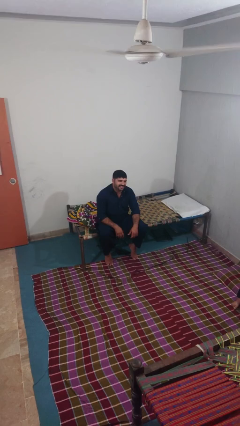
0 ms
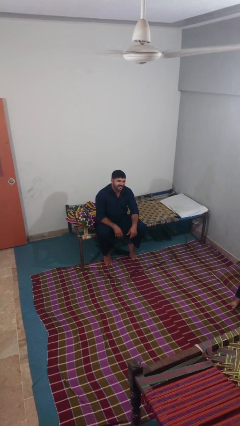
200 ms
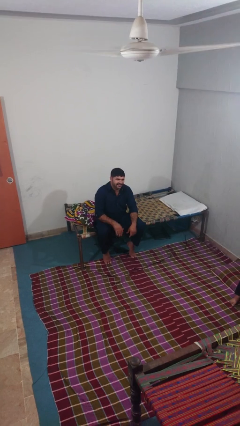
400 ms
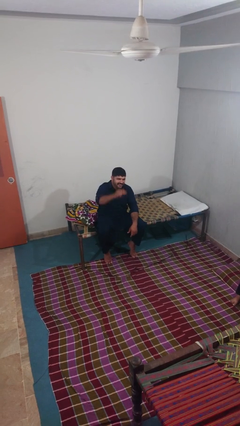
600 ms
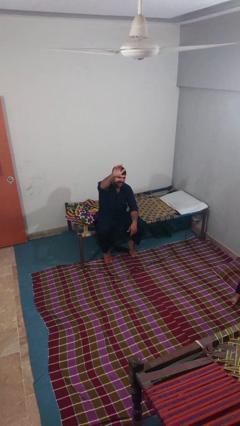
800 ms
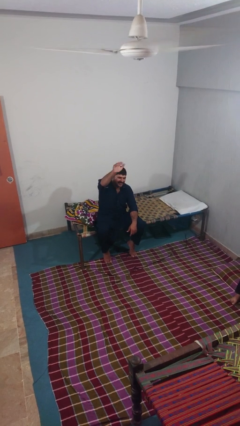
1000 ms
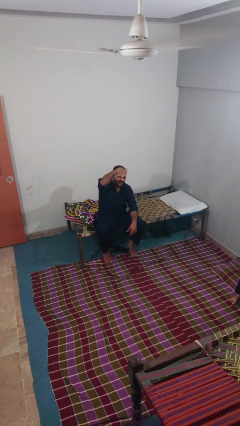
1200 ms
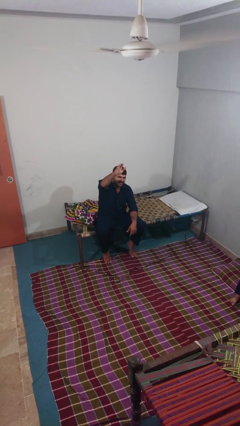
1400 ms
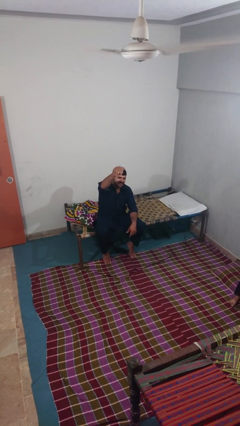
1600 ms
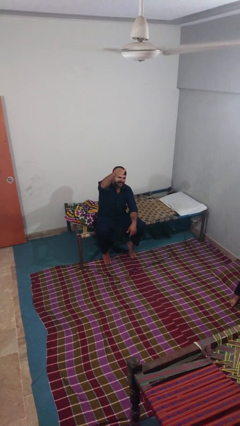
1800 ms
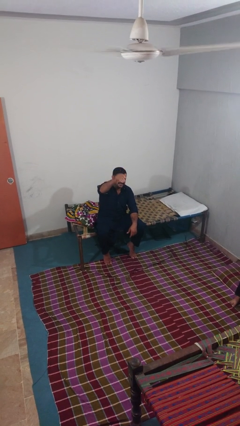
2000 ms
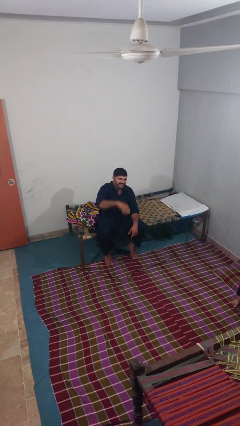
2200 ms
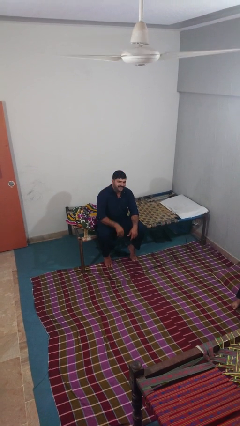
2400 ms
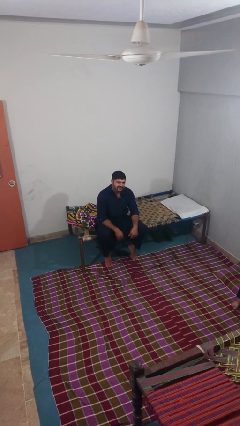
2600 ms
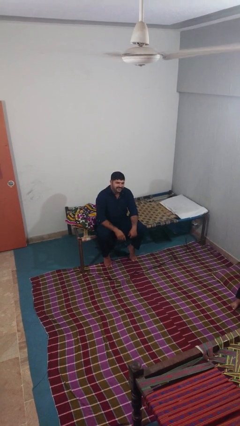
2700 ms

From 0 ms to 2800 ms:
person gestures come here

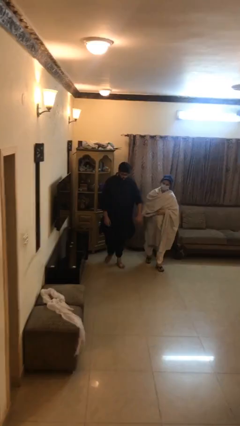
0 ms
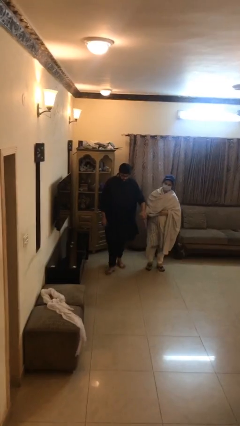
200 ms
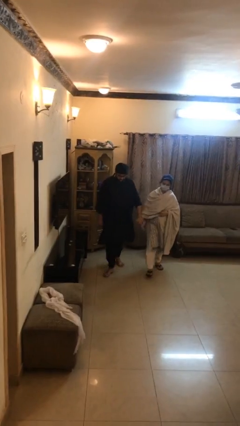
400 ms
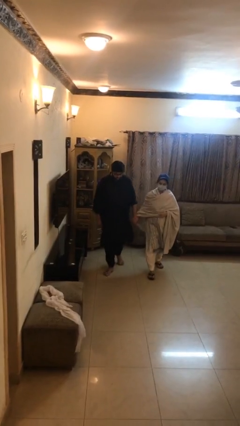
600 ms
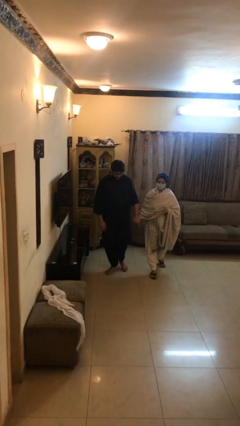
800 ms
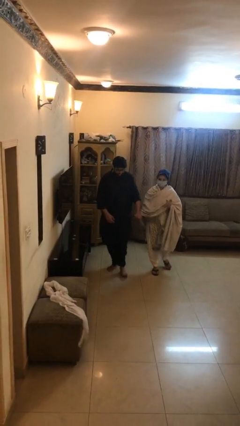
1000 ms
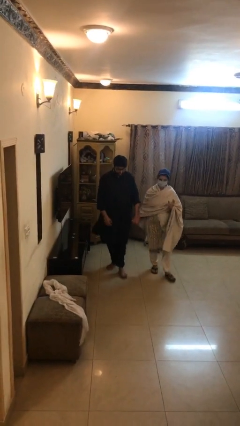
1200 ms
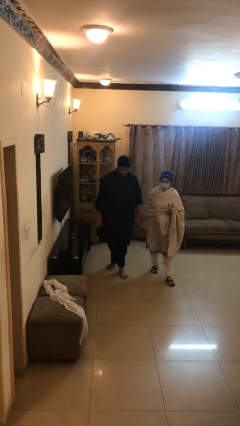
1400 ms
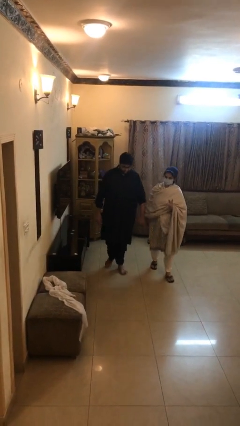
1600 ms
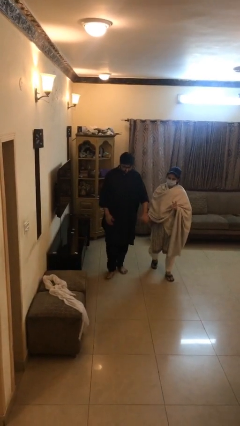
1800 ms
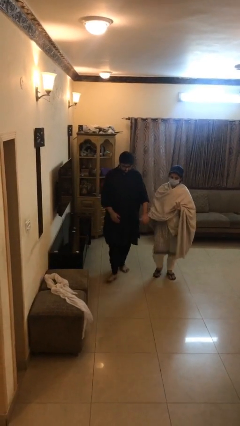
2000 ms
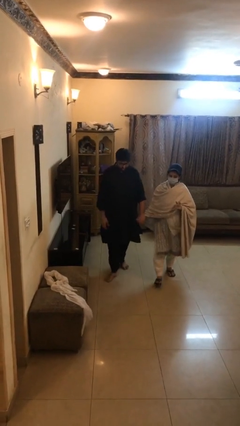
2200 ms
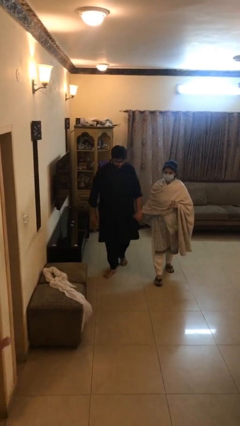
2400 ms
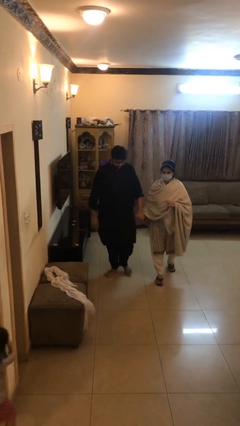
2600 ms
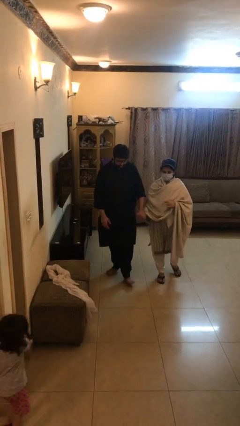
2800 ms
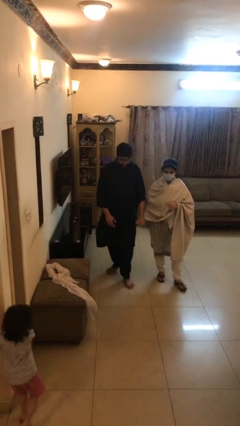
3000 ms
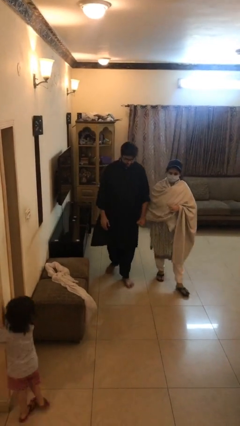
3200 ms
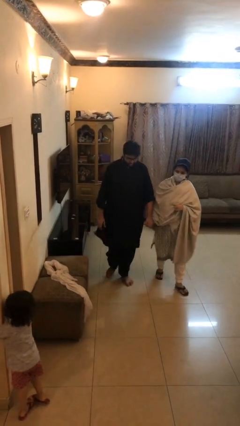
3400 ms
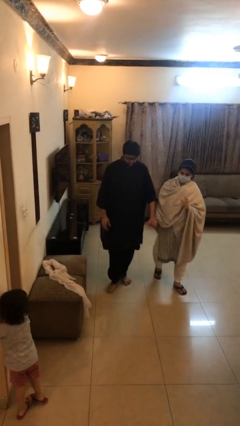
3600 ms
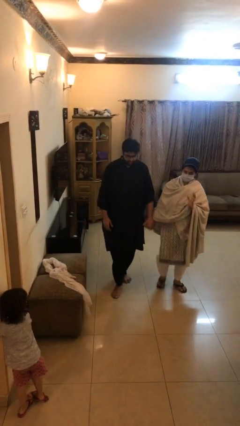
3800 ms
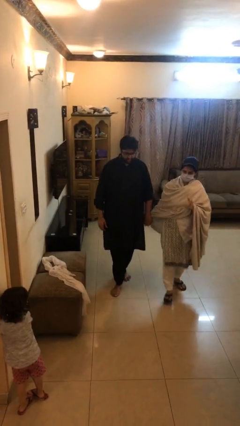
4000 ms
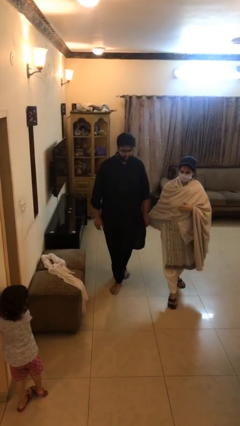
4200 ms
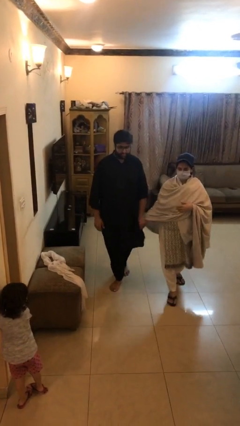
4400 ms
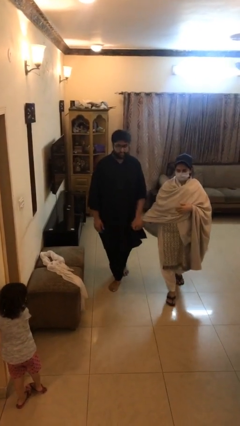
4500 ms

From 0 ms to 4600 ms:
person holds hand

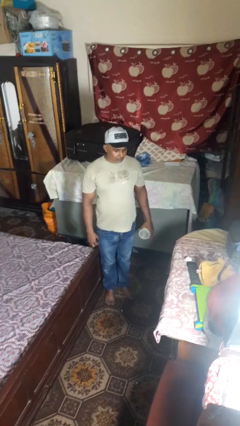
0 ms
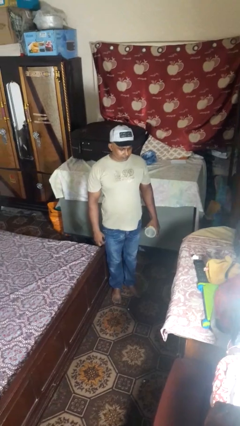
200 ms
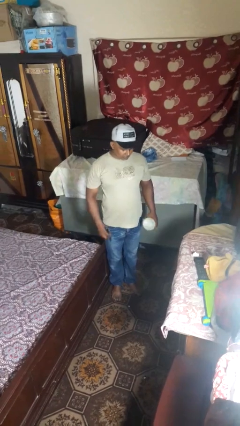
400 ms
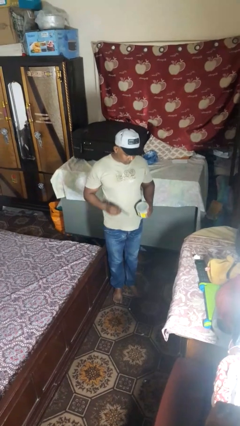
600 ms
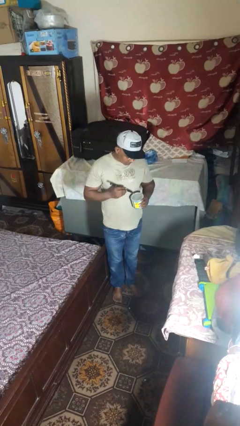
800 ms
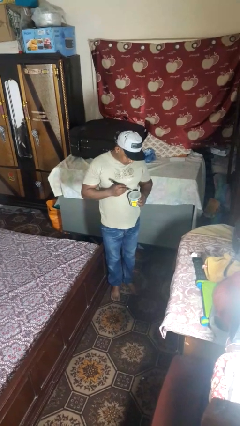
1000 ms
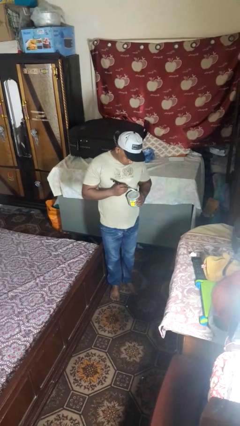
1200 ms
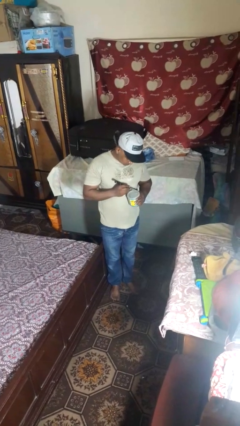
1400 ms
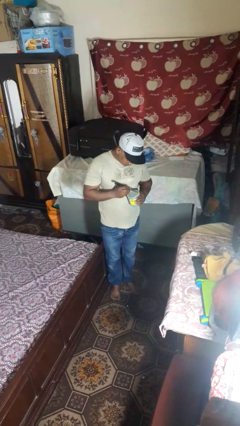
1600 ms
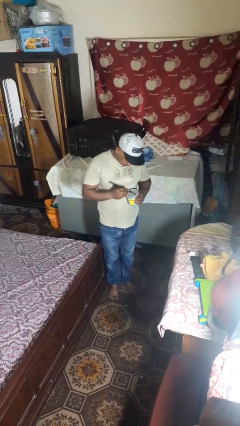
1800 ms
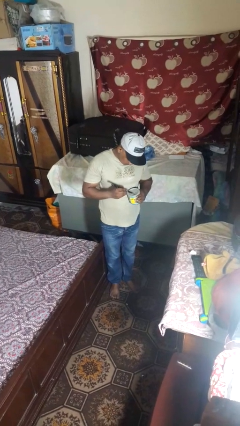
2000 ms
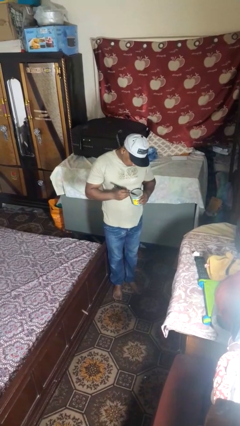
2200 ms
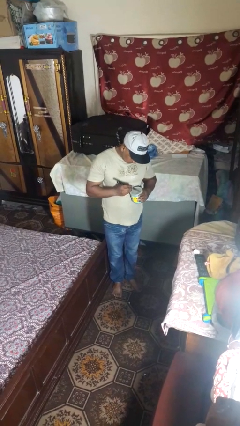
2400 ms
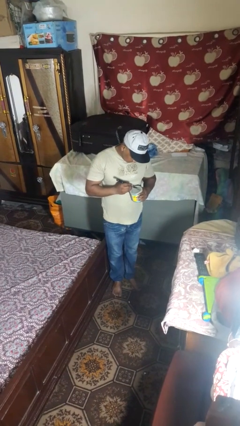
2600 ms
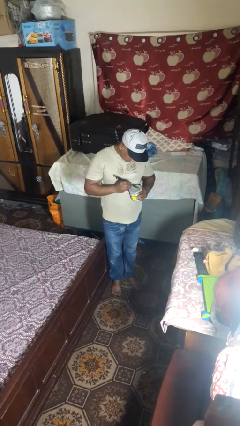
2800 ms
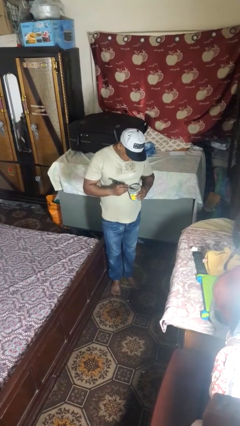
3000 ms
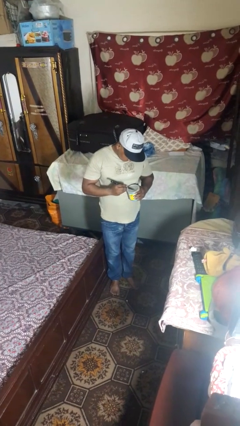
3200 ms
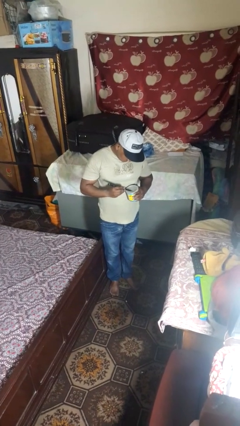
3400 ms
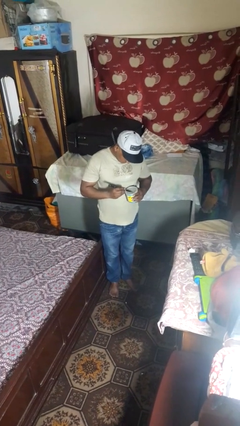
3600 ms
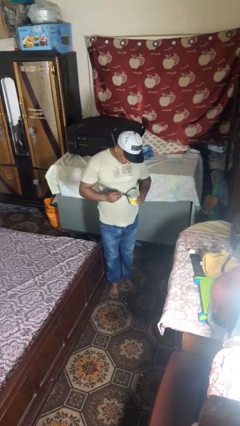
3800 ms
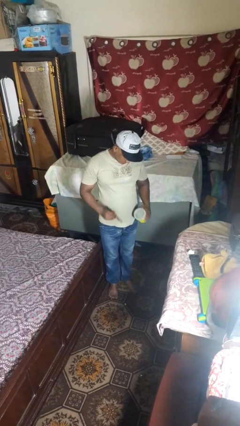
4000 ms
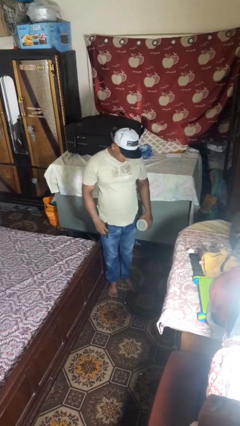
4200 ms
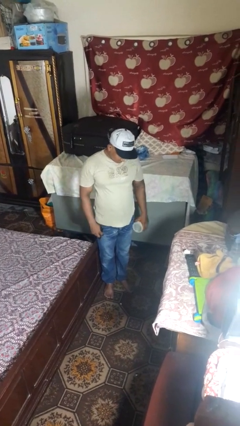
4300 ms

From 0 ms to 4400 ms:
person opens can with can opener

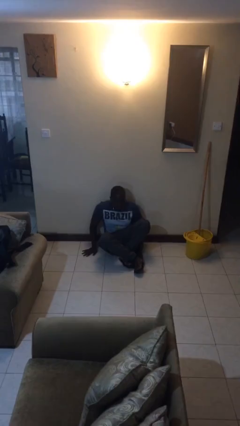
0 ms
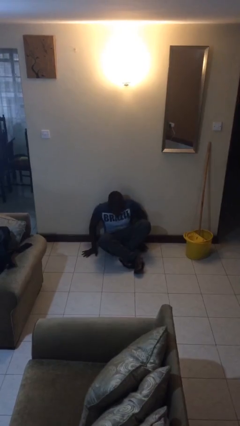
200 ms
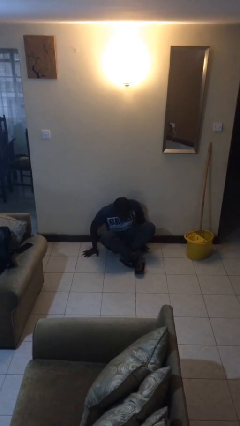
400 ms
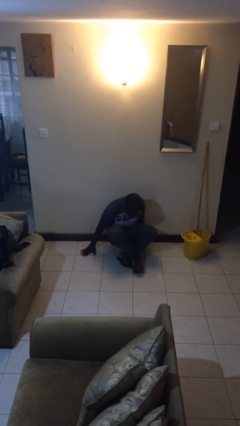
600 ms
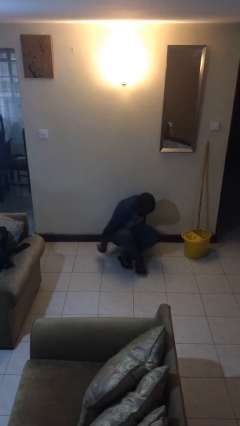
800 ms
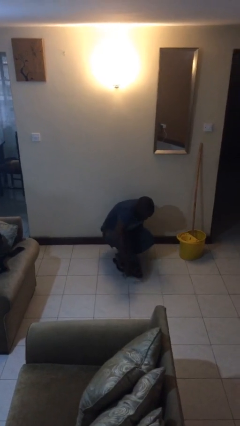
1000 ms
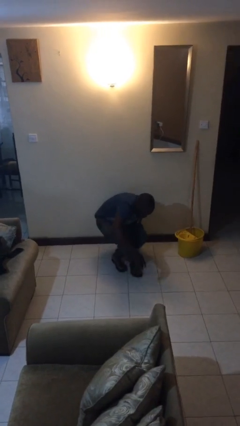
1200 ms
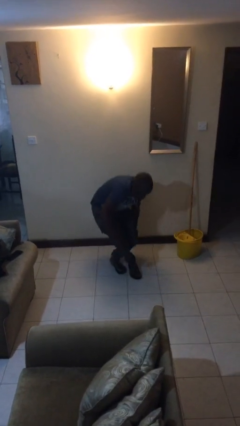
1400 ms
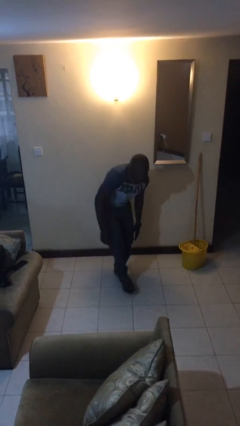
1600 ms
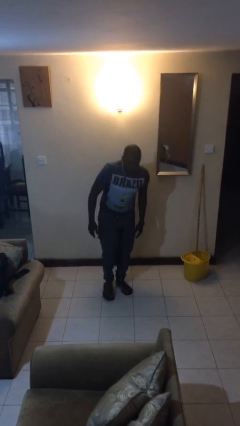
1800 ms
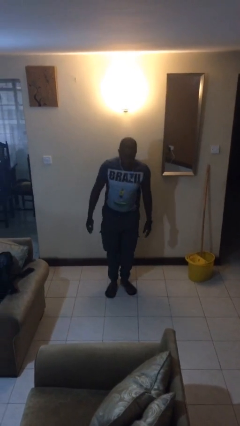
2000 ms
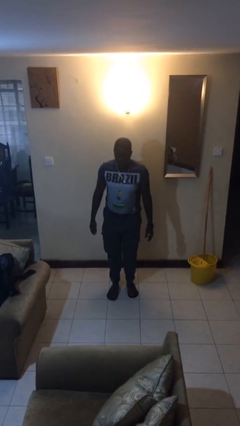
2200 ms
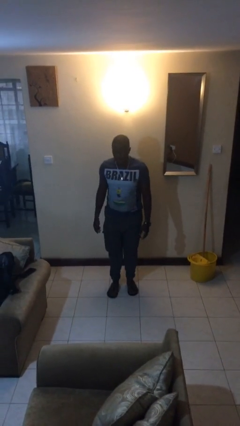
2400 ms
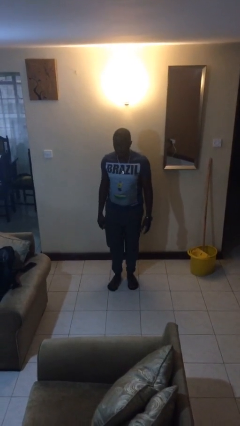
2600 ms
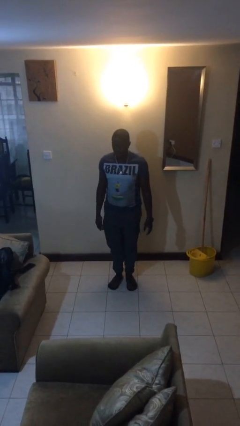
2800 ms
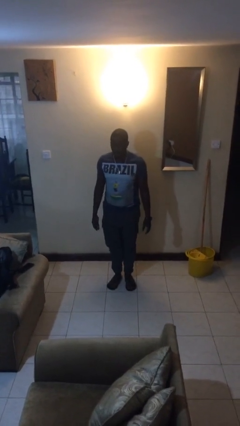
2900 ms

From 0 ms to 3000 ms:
person stands up from floor

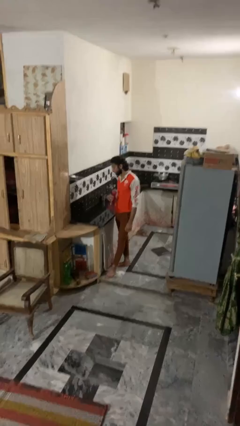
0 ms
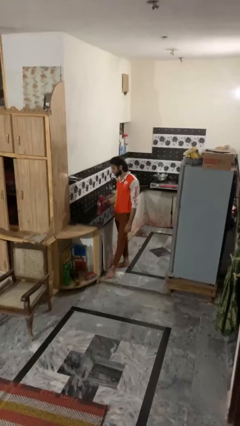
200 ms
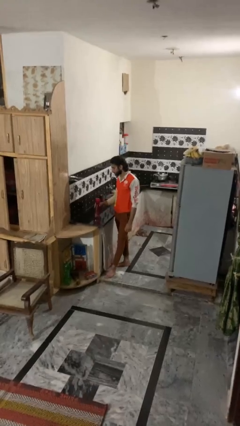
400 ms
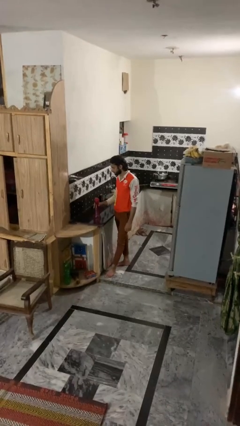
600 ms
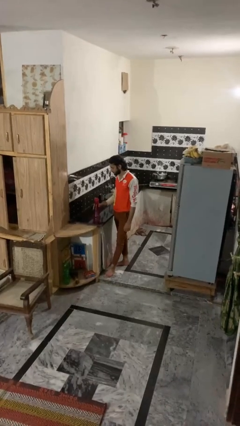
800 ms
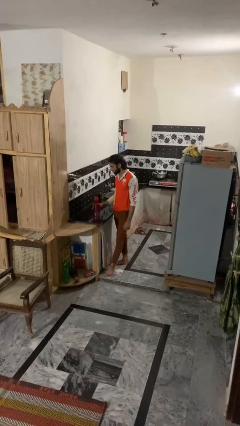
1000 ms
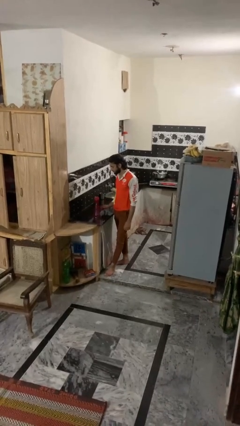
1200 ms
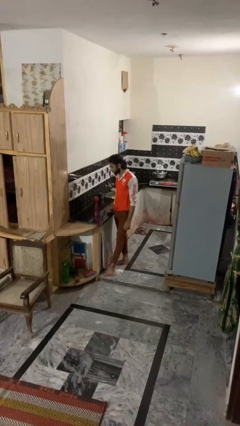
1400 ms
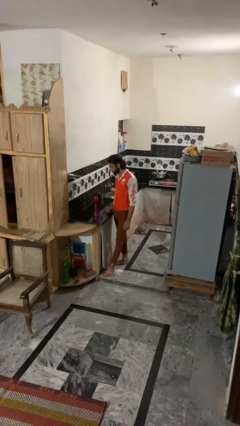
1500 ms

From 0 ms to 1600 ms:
person puts down object on countertop

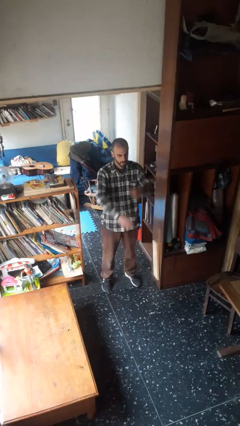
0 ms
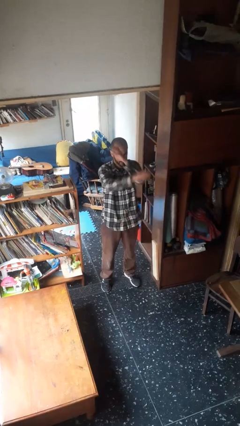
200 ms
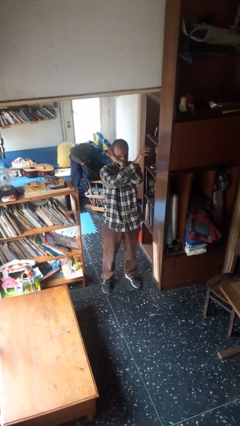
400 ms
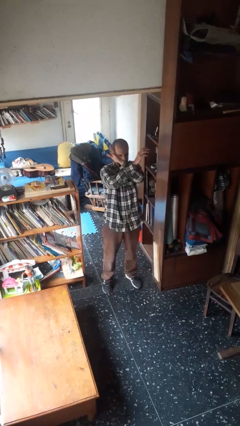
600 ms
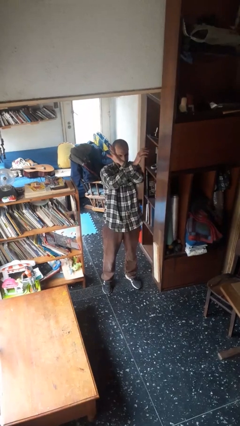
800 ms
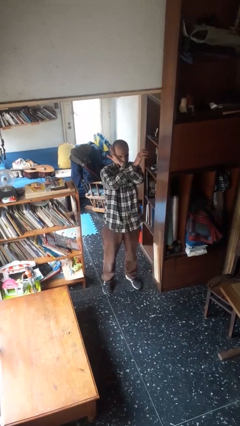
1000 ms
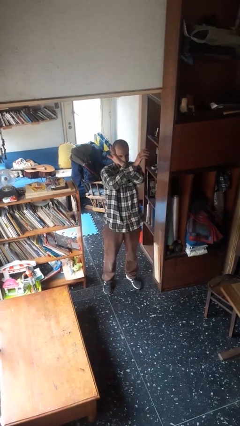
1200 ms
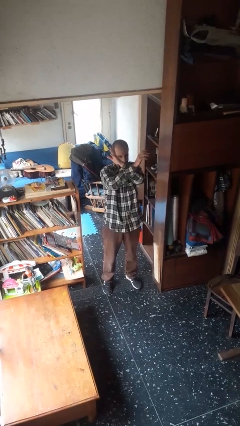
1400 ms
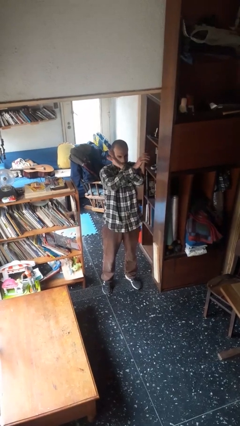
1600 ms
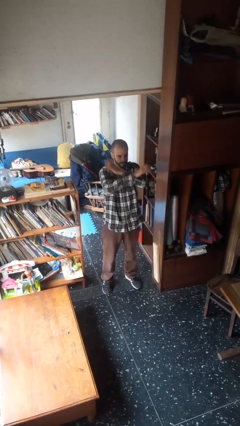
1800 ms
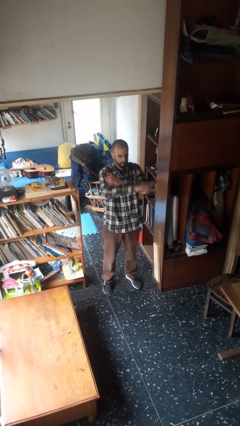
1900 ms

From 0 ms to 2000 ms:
person gestures arms x
